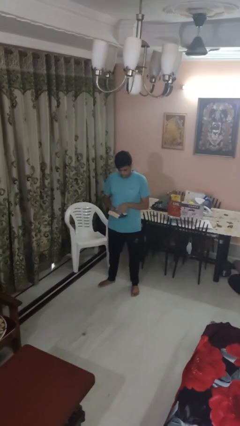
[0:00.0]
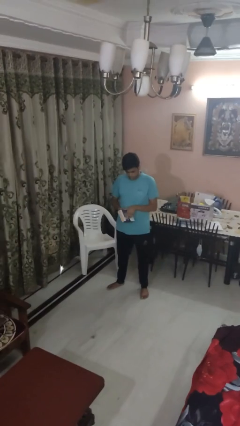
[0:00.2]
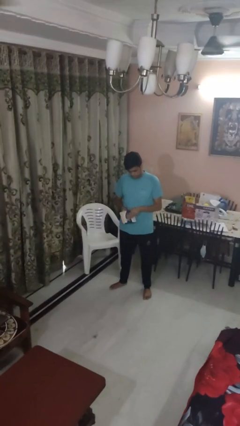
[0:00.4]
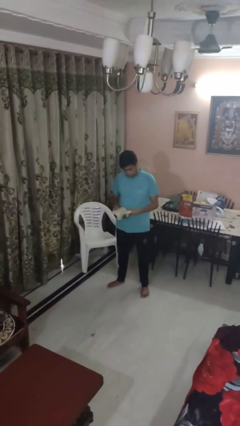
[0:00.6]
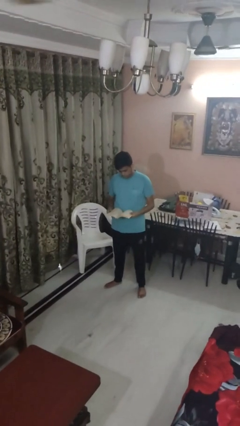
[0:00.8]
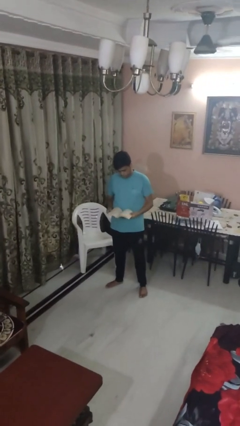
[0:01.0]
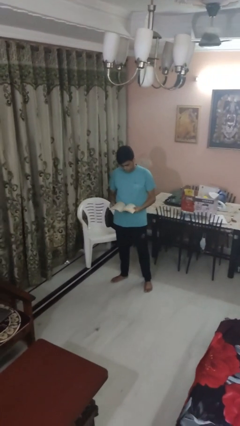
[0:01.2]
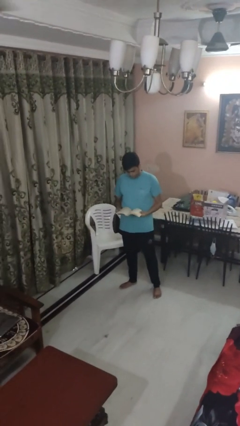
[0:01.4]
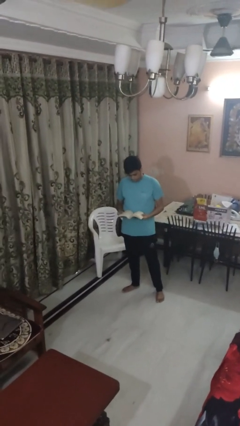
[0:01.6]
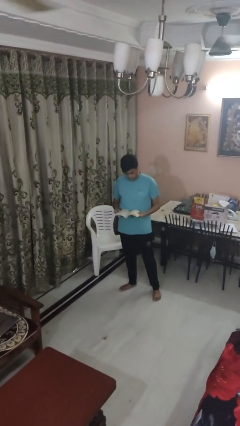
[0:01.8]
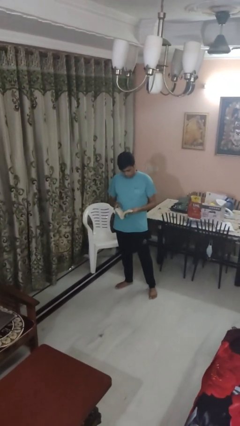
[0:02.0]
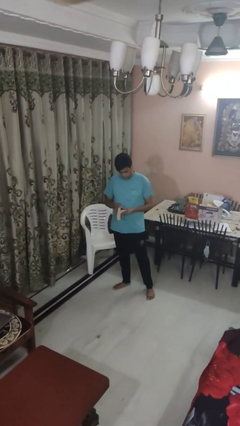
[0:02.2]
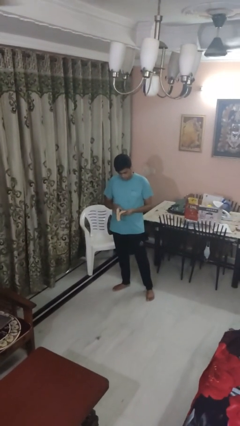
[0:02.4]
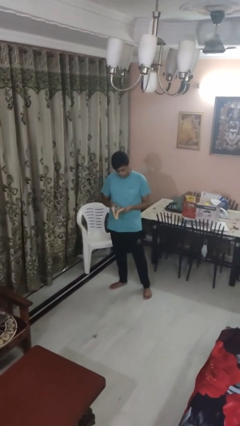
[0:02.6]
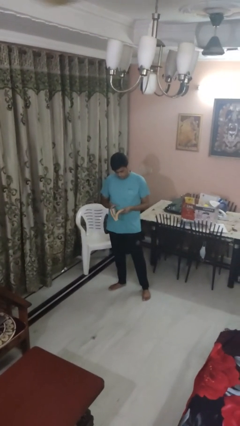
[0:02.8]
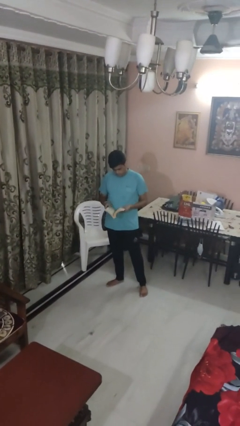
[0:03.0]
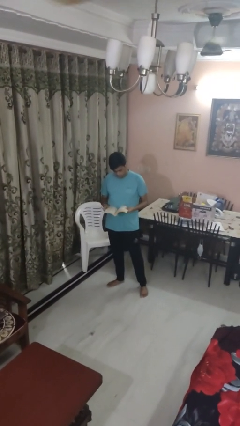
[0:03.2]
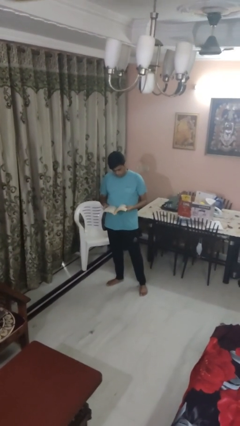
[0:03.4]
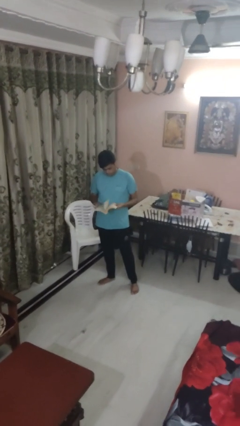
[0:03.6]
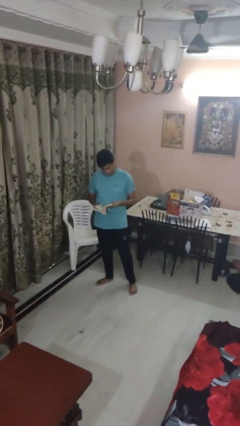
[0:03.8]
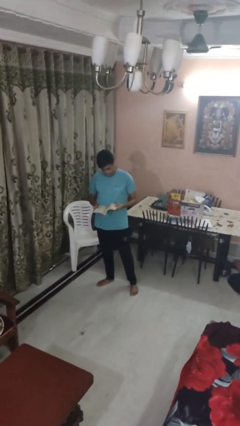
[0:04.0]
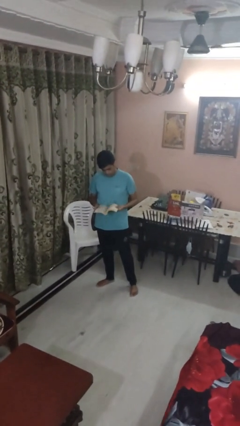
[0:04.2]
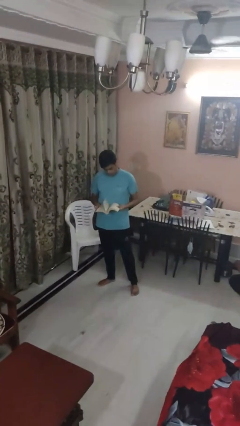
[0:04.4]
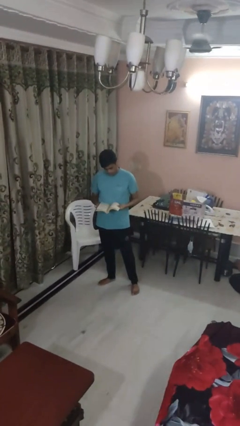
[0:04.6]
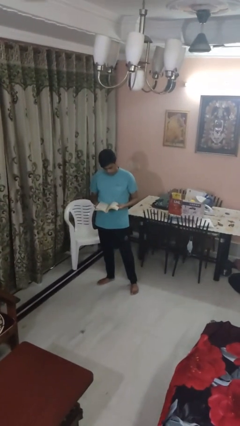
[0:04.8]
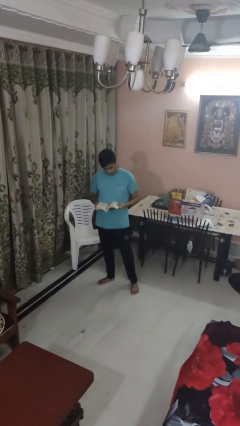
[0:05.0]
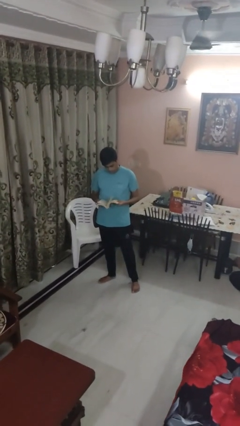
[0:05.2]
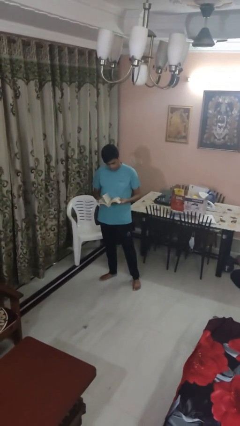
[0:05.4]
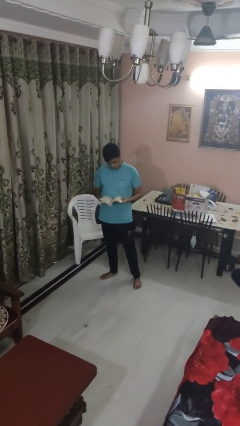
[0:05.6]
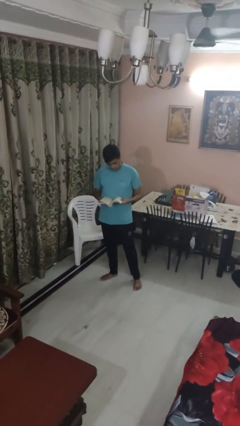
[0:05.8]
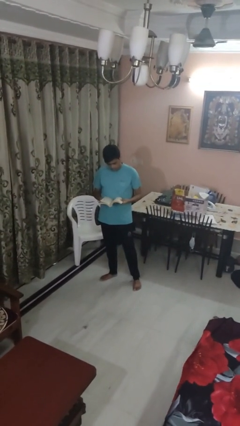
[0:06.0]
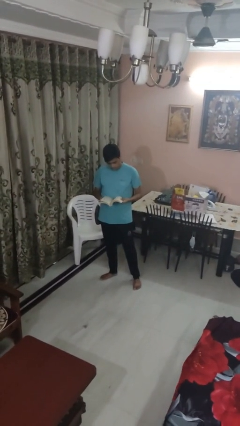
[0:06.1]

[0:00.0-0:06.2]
person reads book

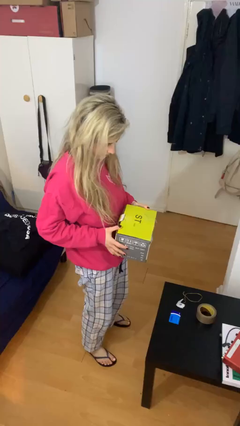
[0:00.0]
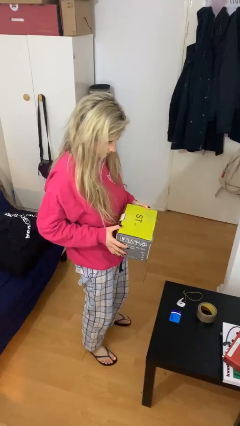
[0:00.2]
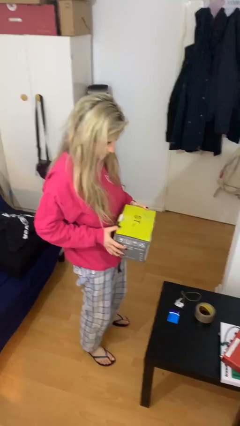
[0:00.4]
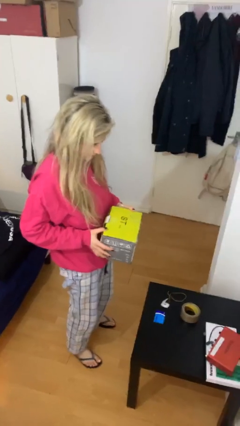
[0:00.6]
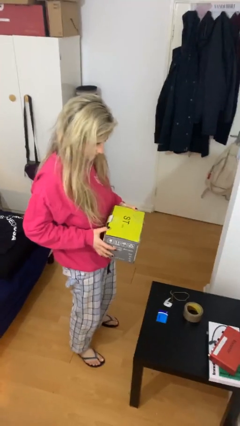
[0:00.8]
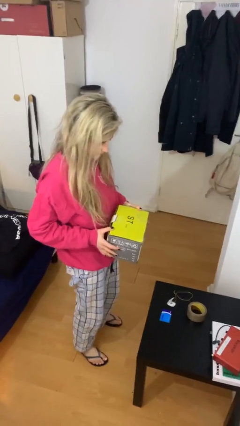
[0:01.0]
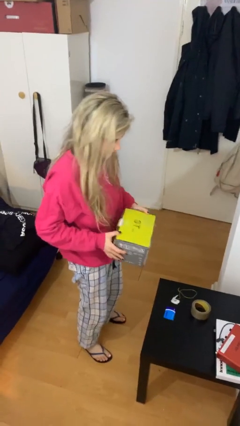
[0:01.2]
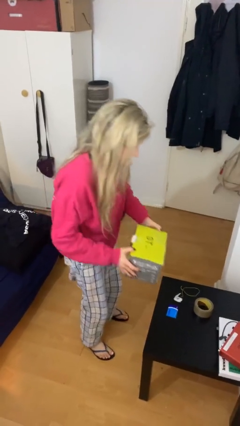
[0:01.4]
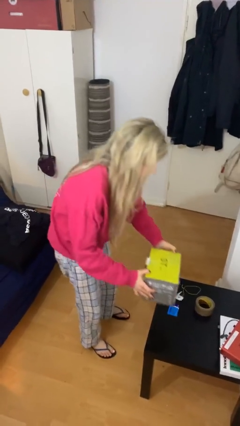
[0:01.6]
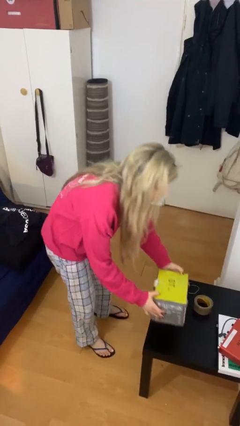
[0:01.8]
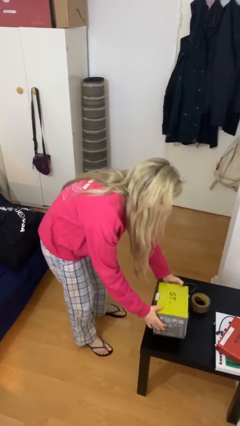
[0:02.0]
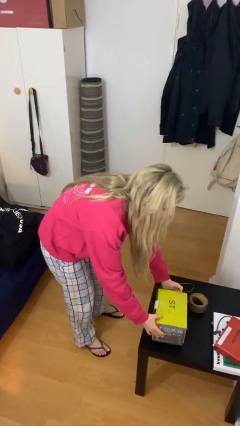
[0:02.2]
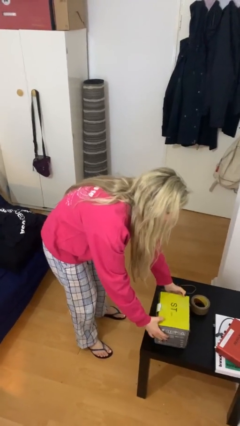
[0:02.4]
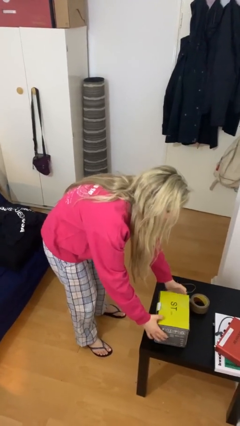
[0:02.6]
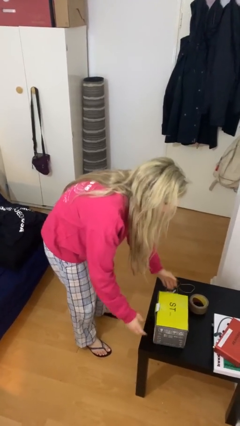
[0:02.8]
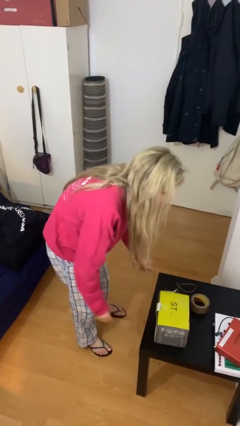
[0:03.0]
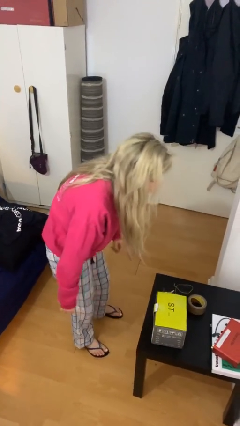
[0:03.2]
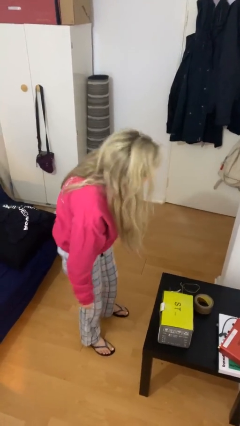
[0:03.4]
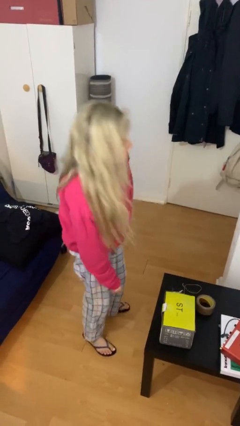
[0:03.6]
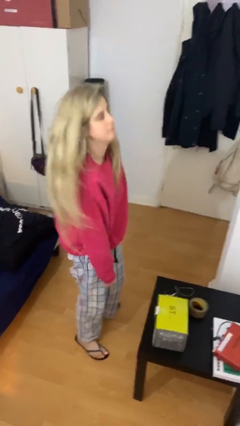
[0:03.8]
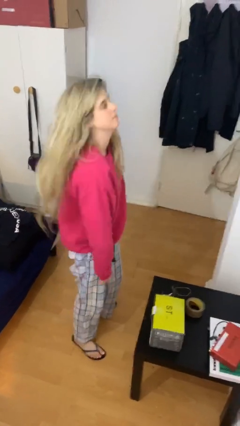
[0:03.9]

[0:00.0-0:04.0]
person puts down object on table

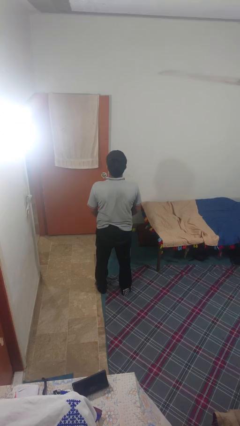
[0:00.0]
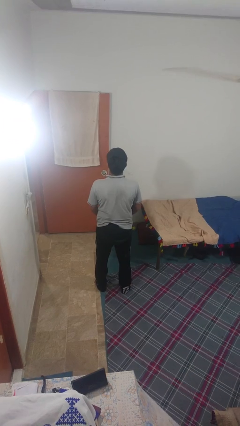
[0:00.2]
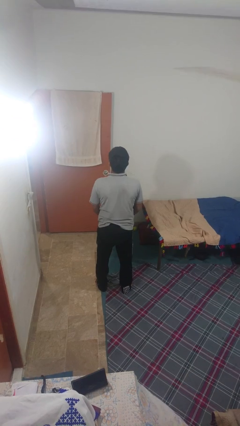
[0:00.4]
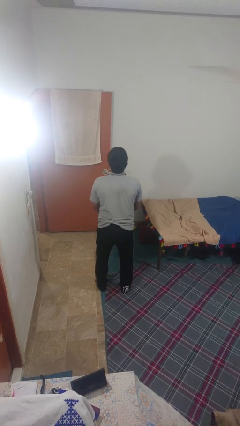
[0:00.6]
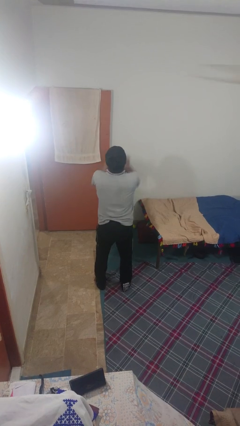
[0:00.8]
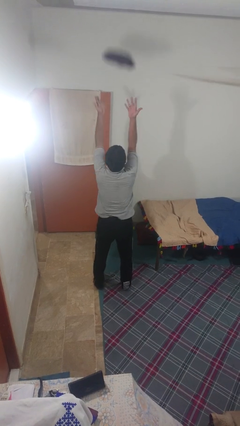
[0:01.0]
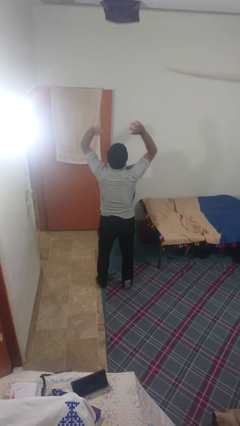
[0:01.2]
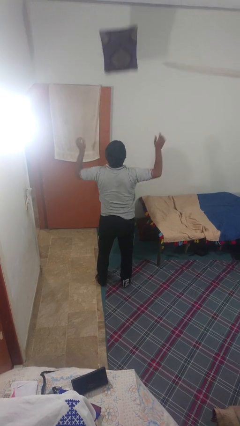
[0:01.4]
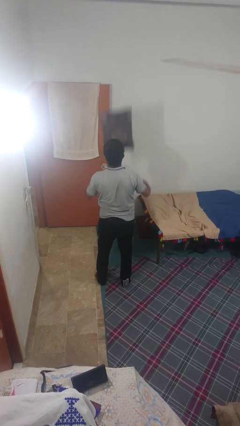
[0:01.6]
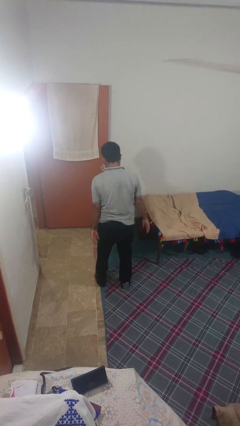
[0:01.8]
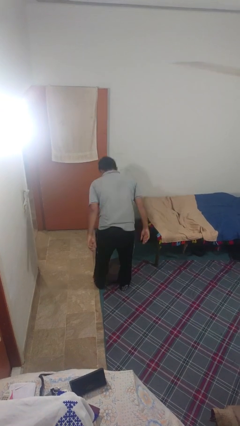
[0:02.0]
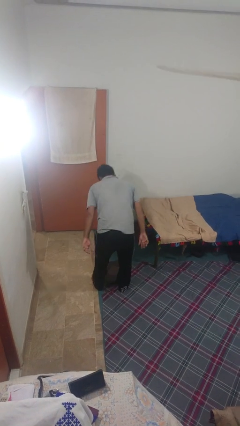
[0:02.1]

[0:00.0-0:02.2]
person throws object into air

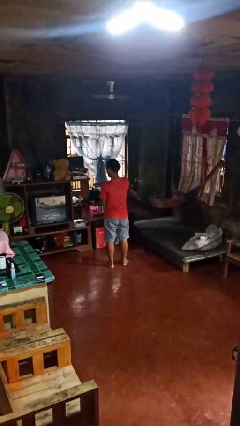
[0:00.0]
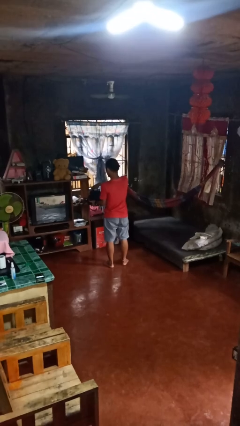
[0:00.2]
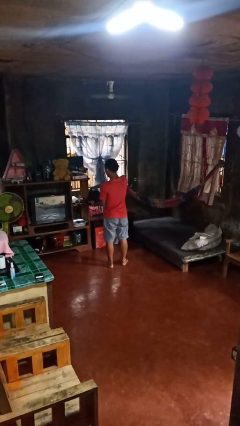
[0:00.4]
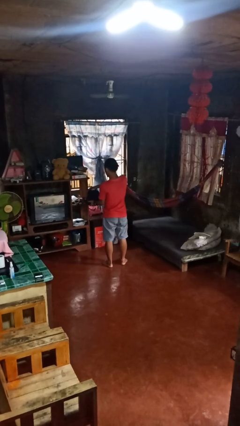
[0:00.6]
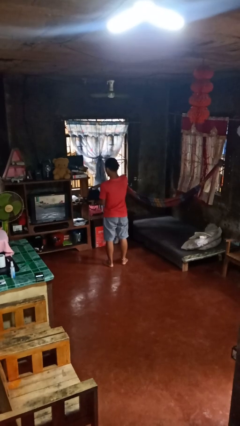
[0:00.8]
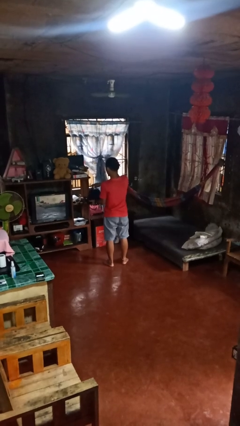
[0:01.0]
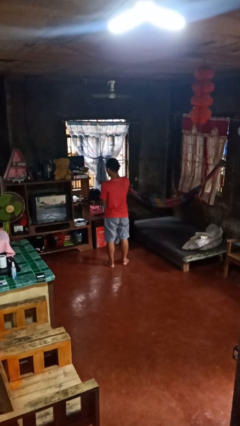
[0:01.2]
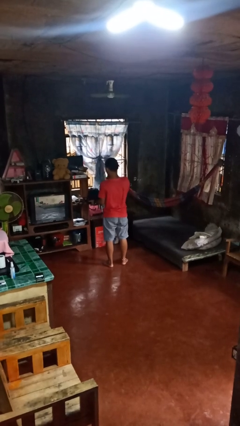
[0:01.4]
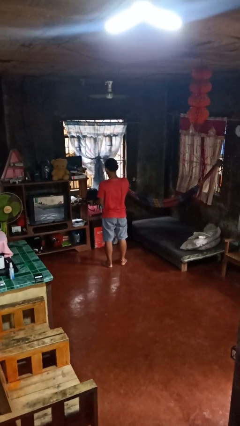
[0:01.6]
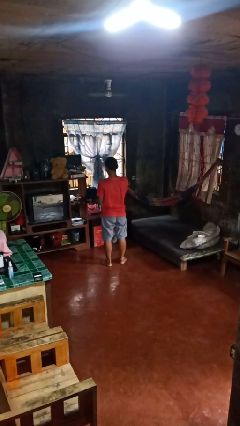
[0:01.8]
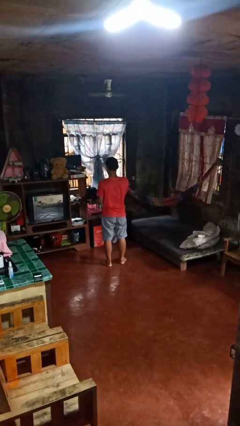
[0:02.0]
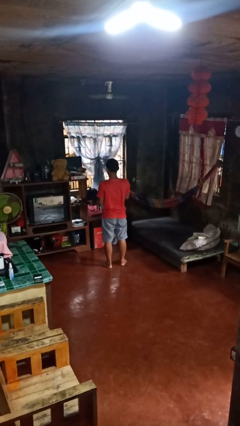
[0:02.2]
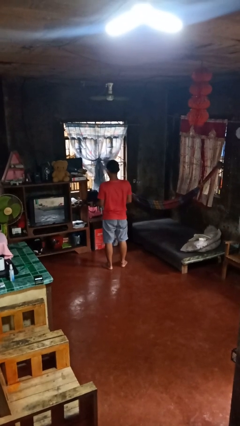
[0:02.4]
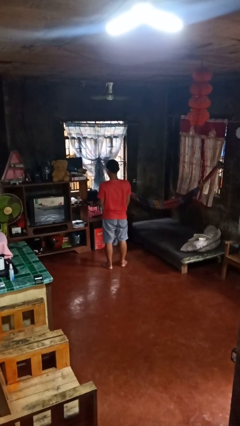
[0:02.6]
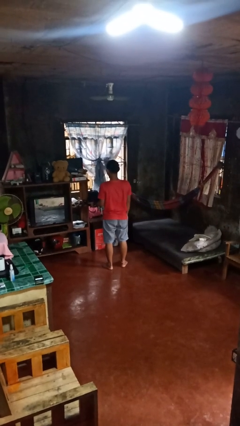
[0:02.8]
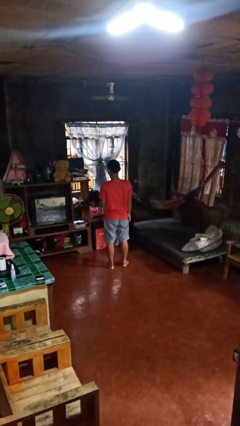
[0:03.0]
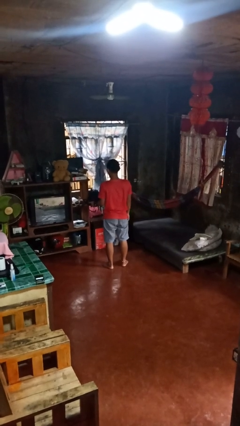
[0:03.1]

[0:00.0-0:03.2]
person eats snack from bag

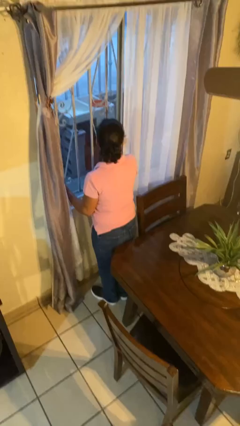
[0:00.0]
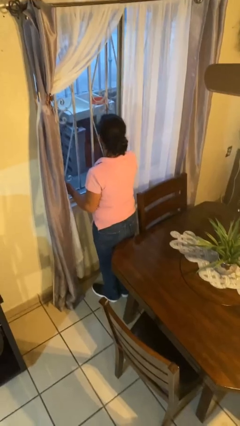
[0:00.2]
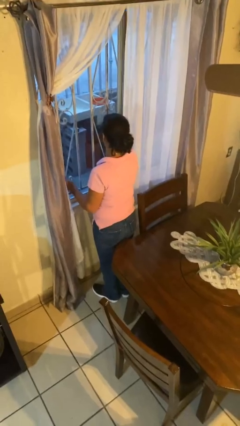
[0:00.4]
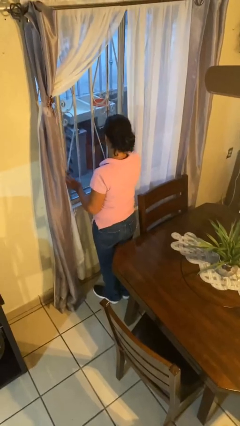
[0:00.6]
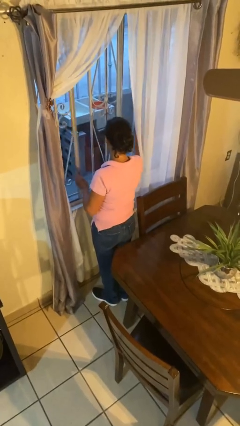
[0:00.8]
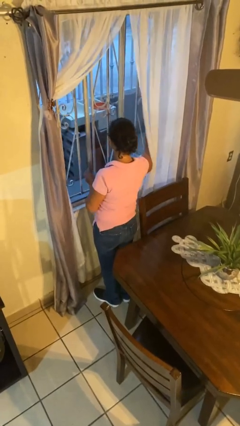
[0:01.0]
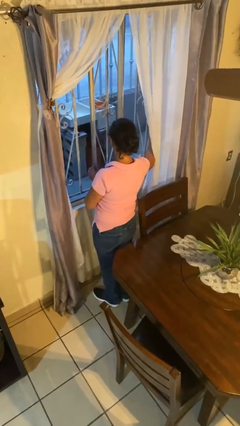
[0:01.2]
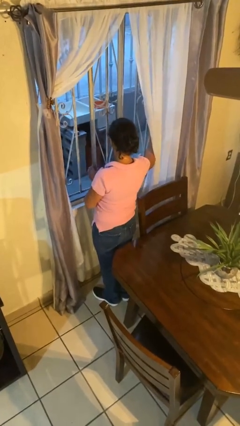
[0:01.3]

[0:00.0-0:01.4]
person opens home window

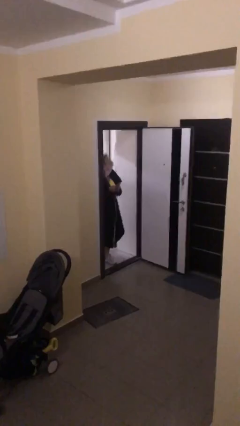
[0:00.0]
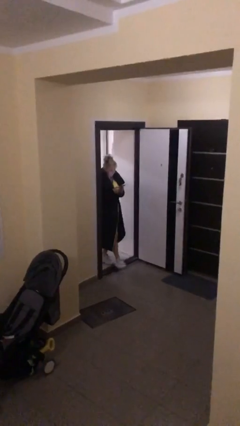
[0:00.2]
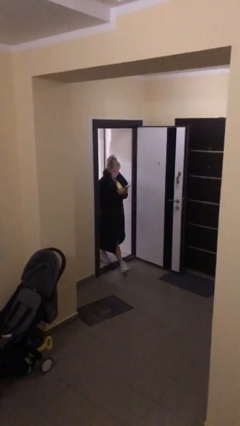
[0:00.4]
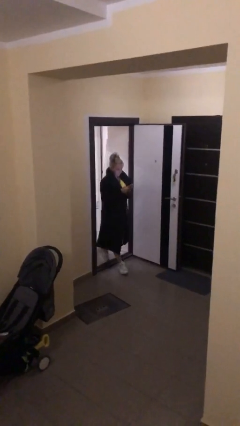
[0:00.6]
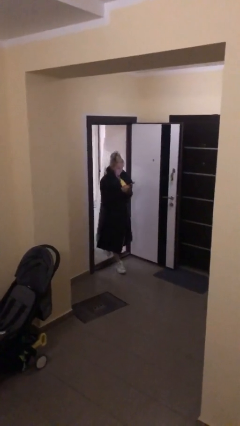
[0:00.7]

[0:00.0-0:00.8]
person enters scene through structure
